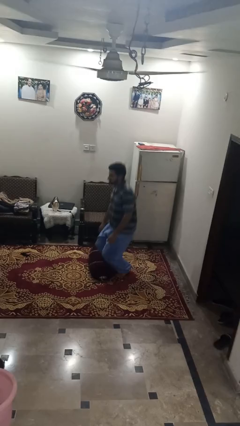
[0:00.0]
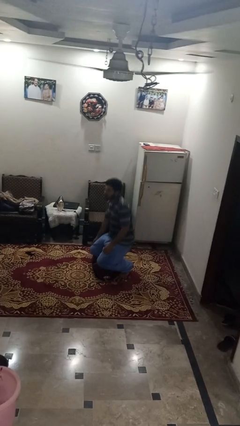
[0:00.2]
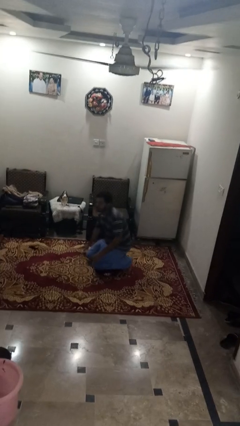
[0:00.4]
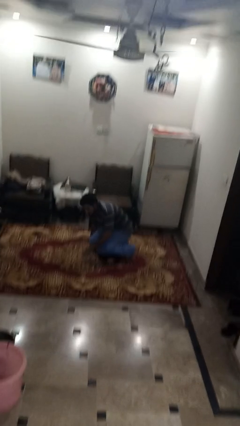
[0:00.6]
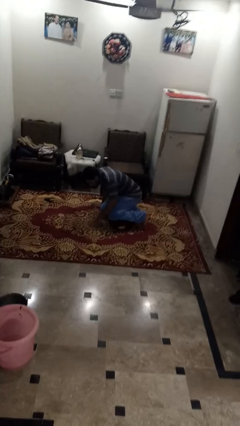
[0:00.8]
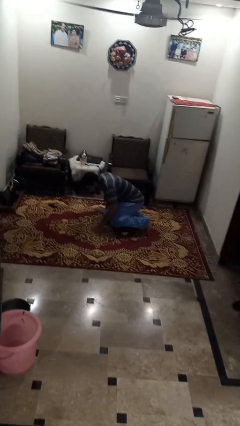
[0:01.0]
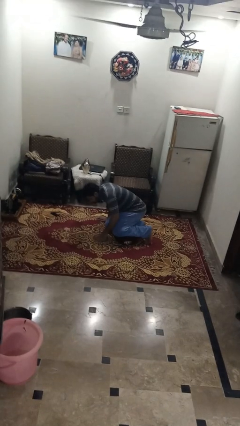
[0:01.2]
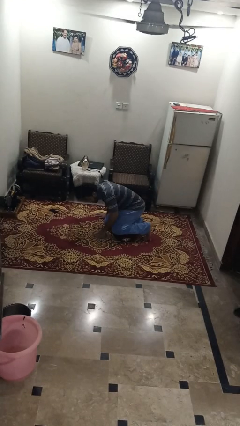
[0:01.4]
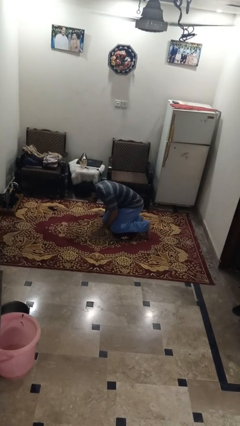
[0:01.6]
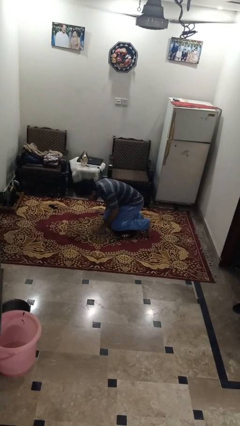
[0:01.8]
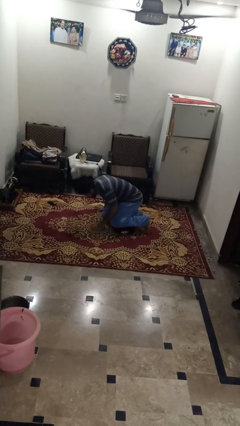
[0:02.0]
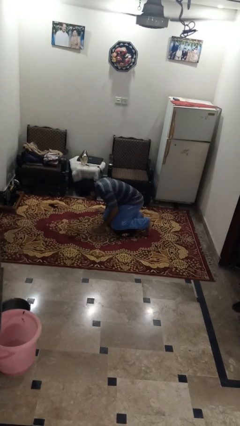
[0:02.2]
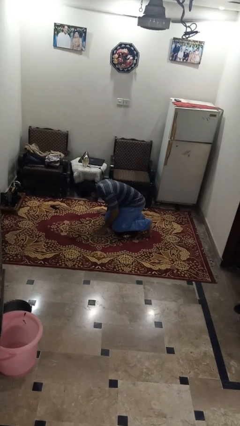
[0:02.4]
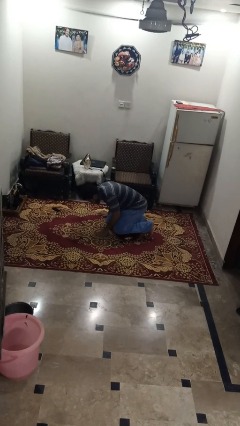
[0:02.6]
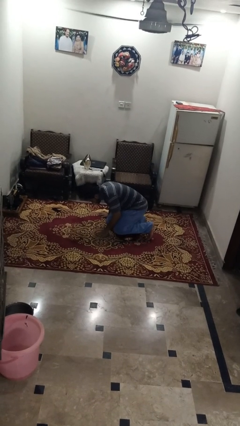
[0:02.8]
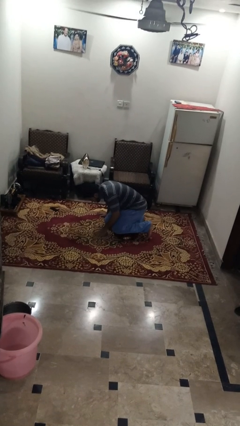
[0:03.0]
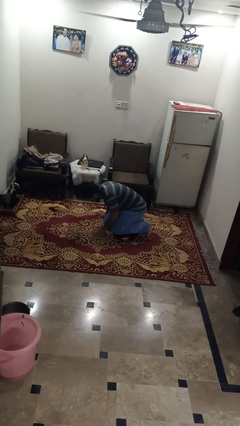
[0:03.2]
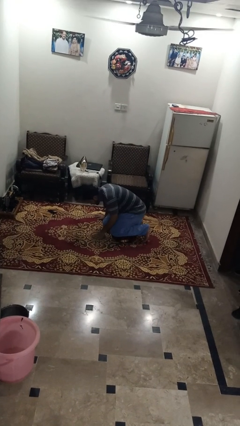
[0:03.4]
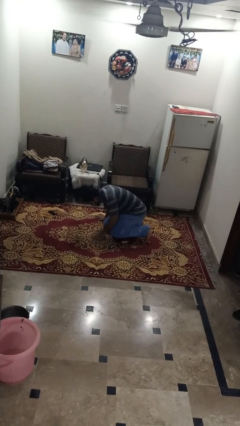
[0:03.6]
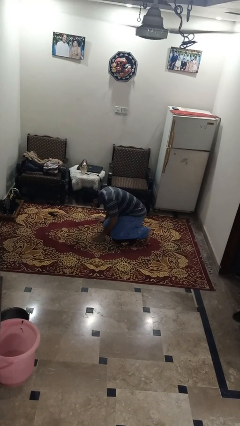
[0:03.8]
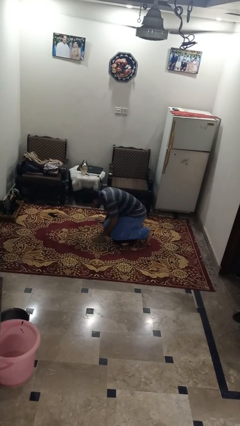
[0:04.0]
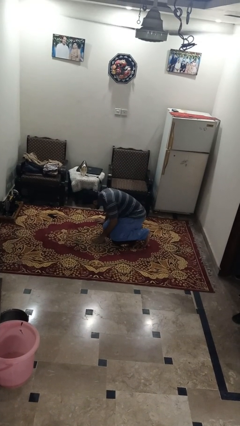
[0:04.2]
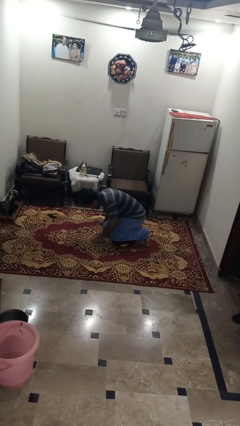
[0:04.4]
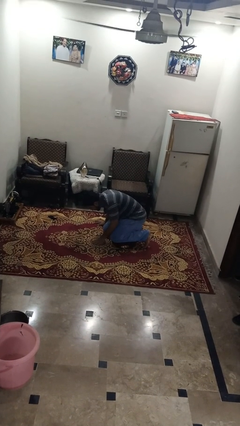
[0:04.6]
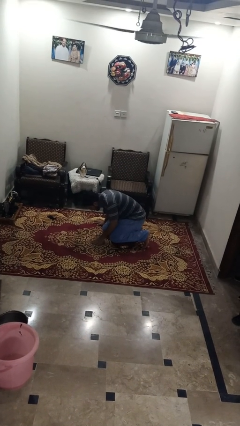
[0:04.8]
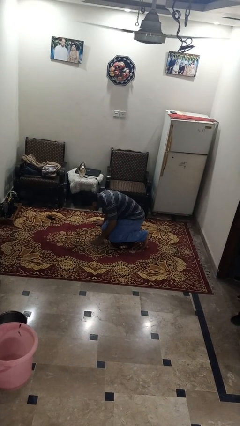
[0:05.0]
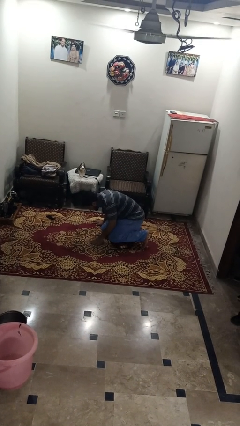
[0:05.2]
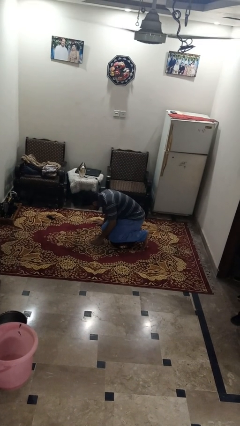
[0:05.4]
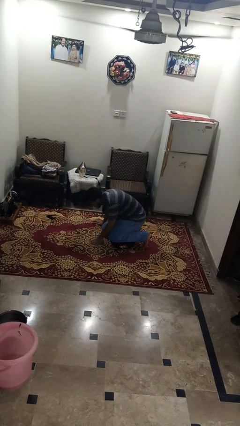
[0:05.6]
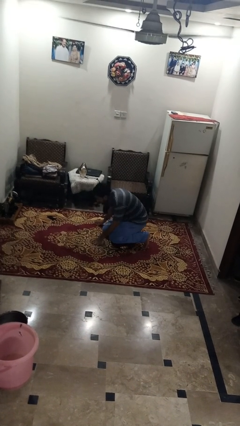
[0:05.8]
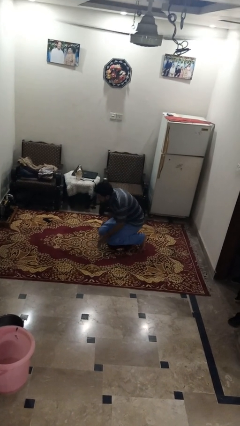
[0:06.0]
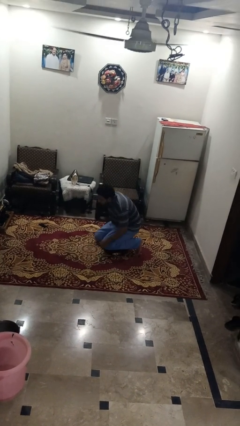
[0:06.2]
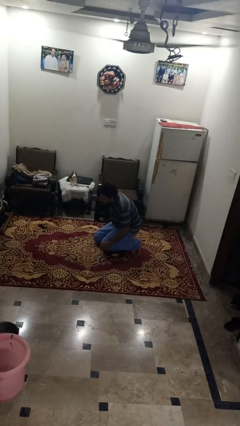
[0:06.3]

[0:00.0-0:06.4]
person trips on object on floor

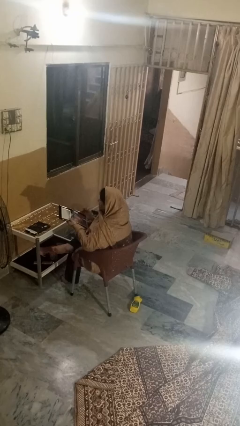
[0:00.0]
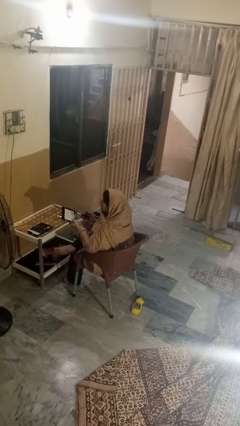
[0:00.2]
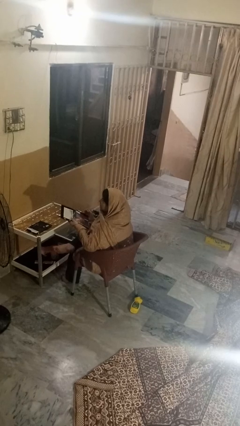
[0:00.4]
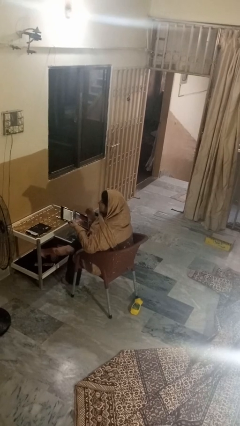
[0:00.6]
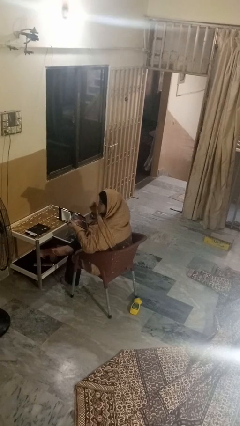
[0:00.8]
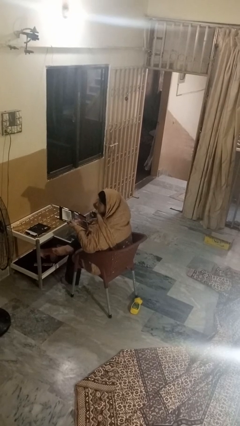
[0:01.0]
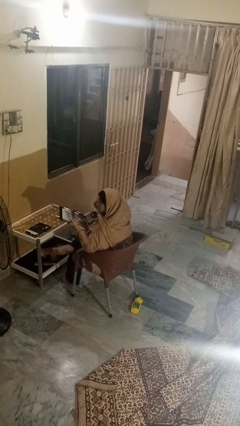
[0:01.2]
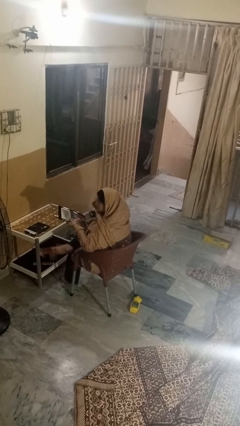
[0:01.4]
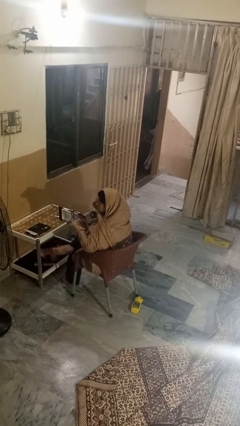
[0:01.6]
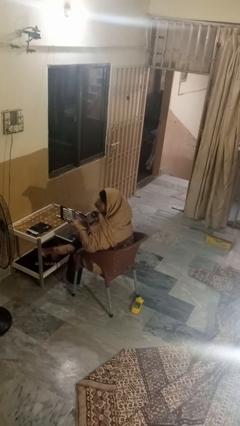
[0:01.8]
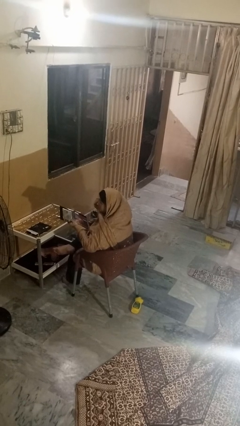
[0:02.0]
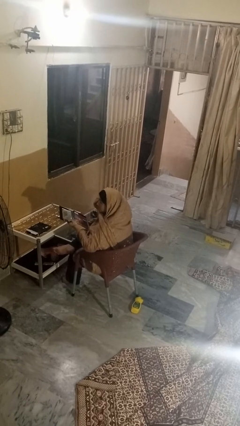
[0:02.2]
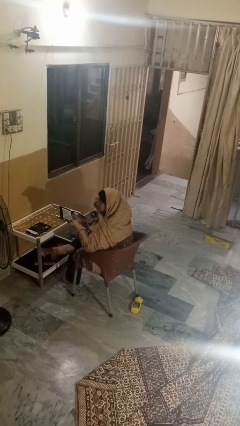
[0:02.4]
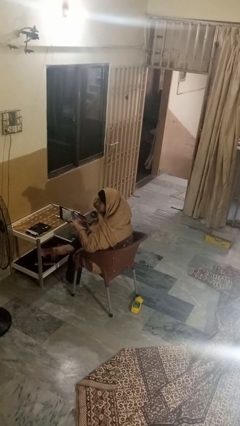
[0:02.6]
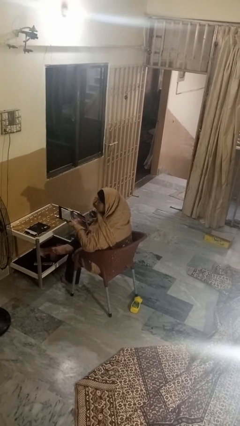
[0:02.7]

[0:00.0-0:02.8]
person applies eye makeup

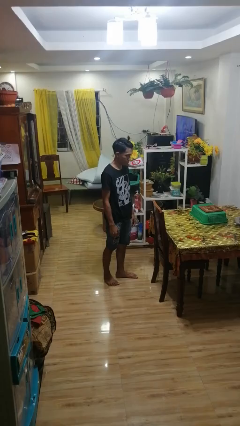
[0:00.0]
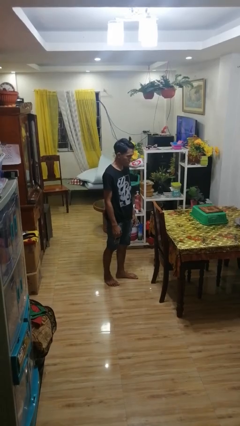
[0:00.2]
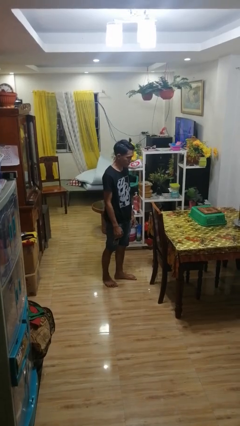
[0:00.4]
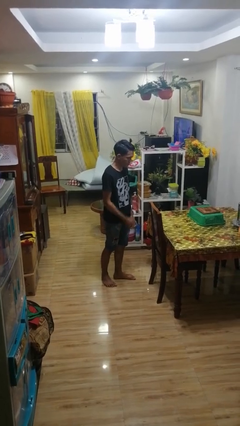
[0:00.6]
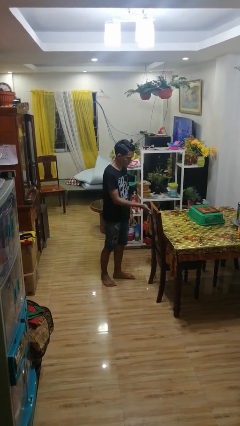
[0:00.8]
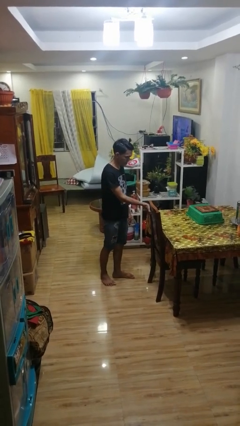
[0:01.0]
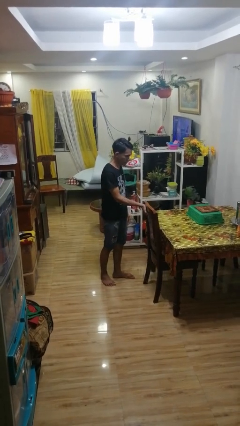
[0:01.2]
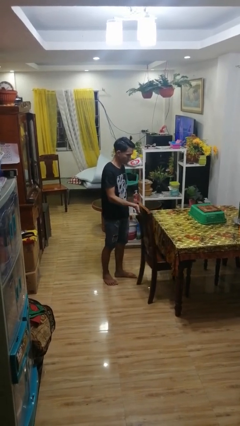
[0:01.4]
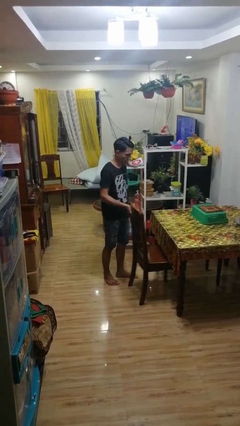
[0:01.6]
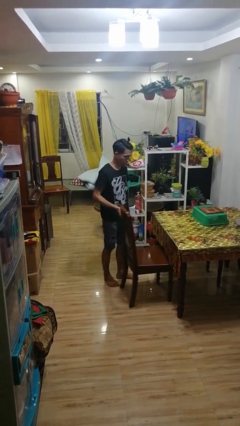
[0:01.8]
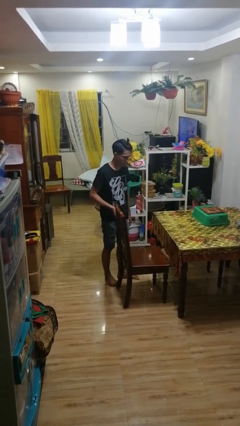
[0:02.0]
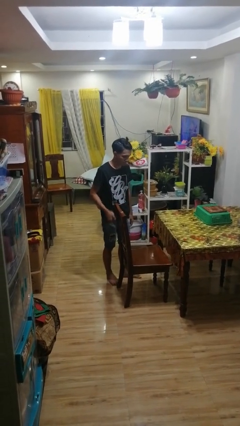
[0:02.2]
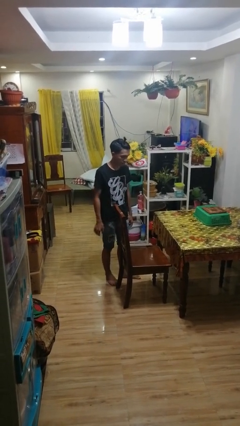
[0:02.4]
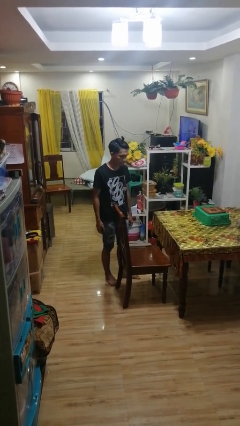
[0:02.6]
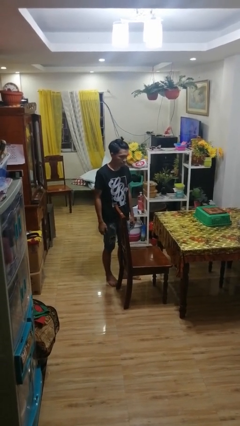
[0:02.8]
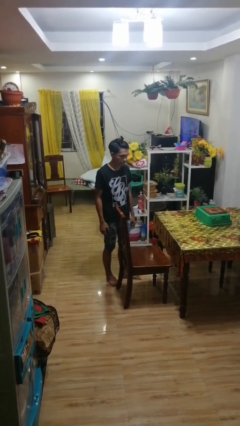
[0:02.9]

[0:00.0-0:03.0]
person pulls out chair

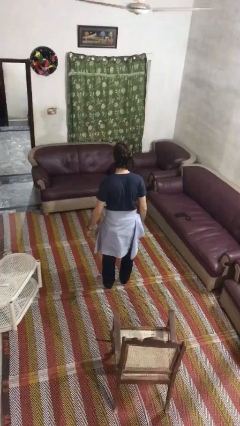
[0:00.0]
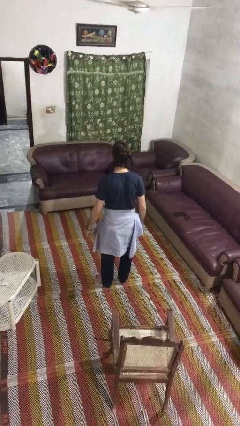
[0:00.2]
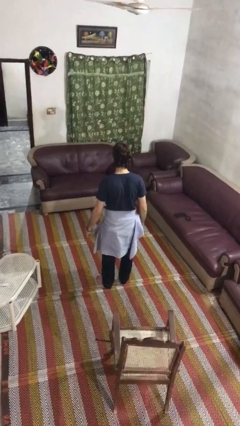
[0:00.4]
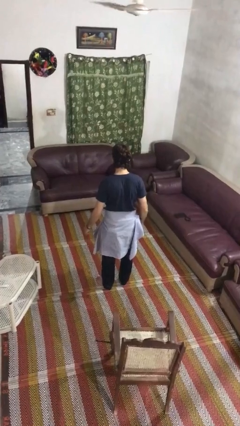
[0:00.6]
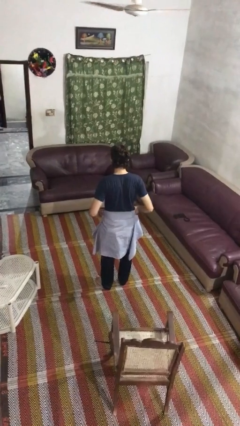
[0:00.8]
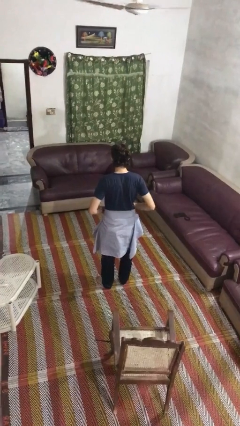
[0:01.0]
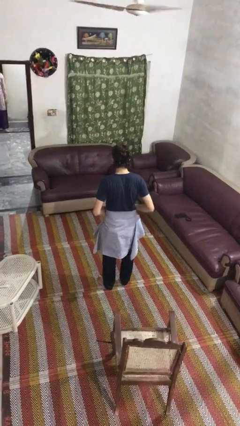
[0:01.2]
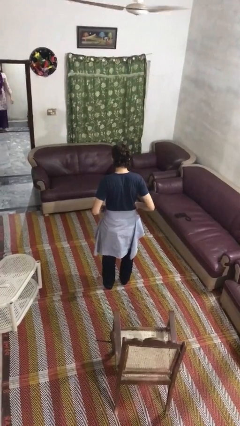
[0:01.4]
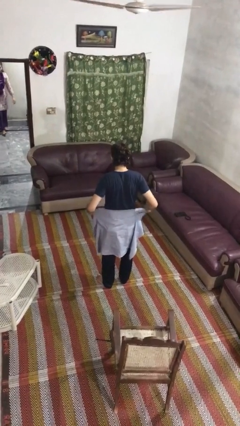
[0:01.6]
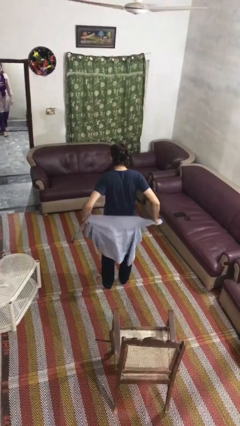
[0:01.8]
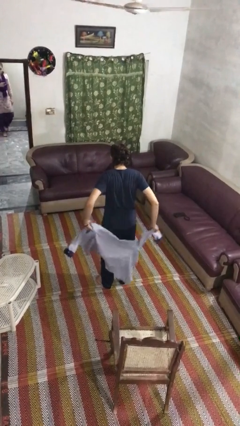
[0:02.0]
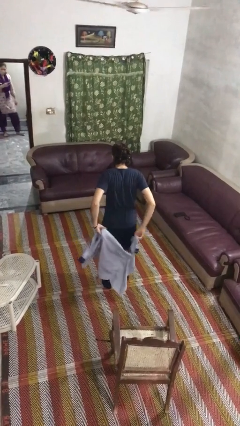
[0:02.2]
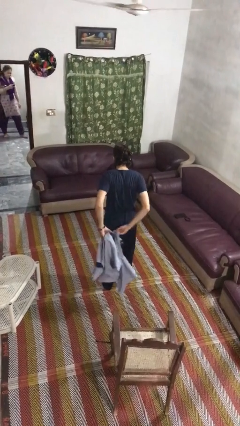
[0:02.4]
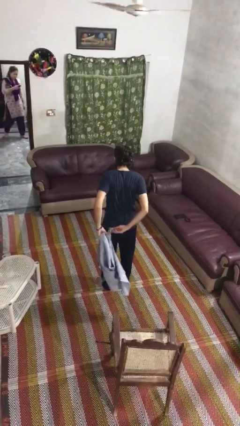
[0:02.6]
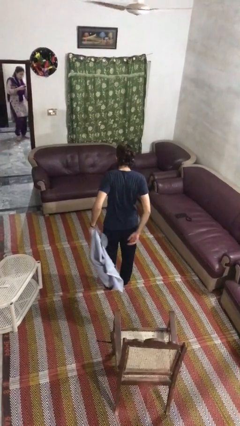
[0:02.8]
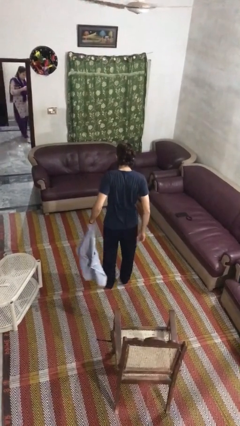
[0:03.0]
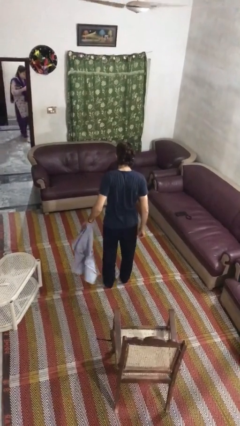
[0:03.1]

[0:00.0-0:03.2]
person unties jacket around waist

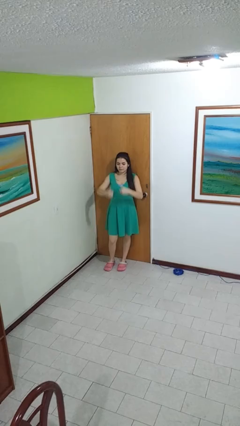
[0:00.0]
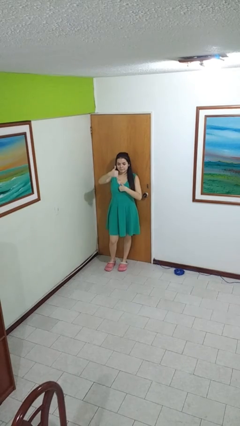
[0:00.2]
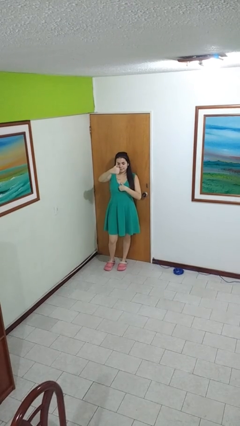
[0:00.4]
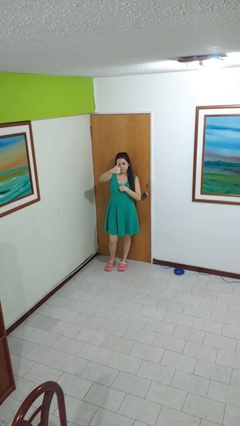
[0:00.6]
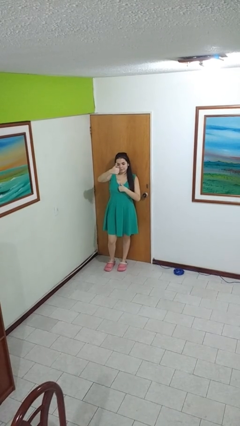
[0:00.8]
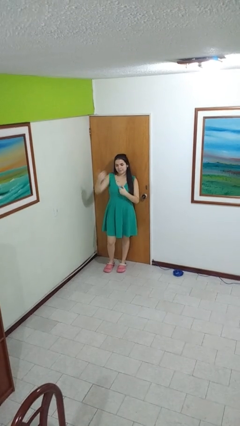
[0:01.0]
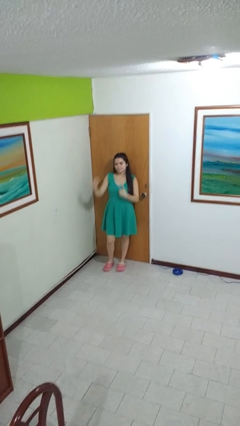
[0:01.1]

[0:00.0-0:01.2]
person gestures thumbs up

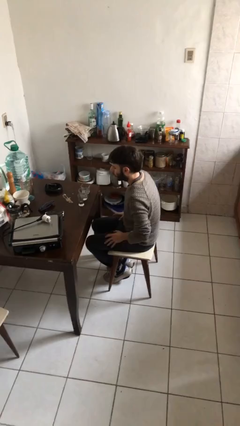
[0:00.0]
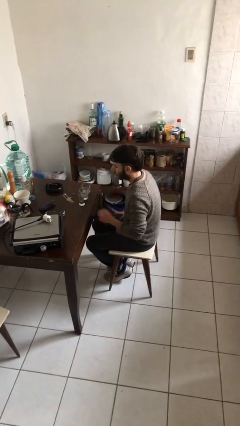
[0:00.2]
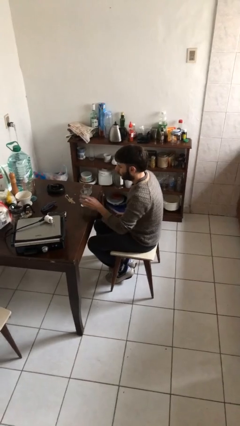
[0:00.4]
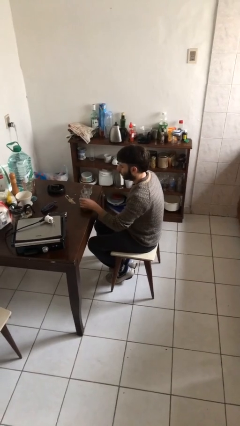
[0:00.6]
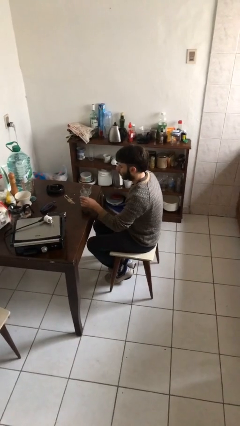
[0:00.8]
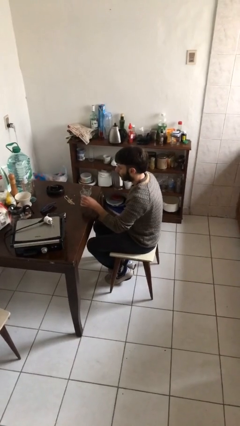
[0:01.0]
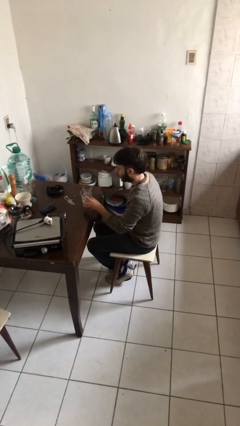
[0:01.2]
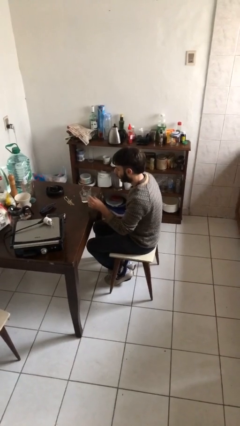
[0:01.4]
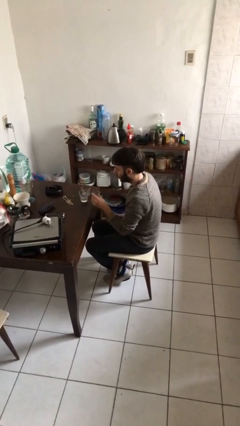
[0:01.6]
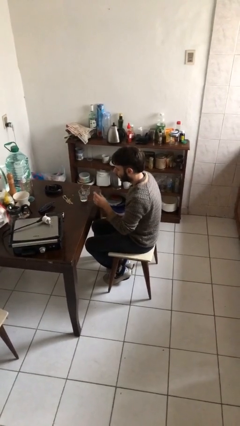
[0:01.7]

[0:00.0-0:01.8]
person picks up object from table
